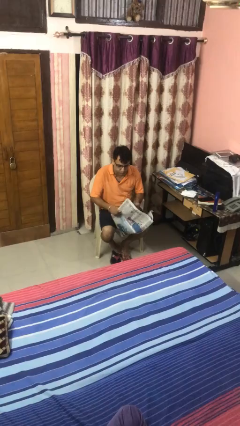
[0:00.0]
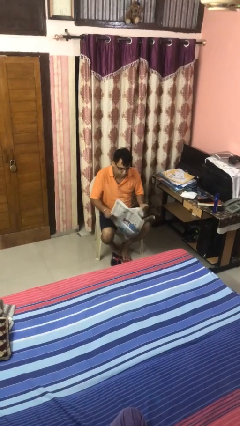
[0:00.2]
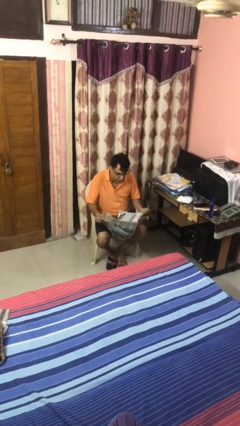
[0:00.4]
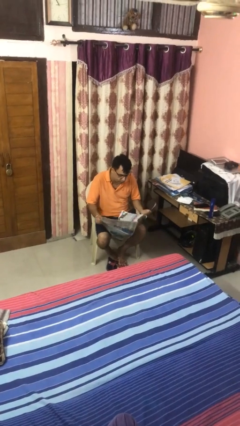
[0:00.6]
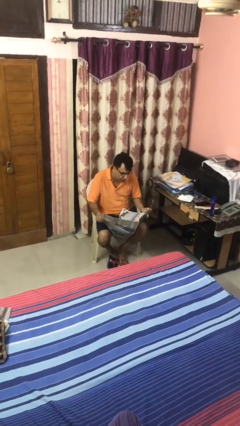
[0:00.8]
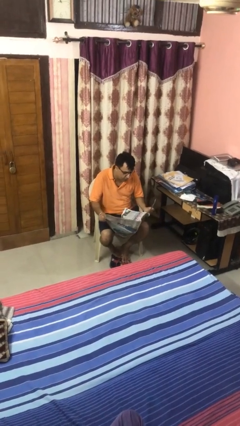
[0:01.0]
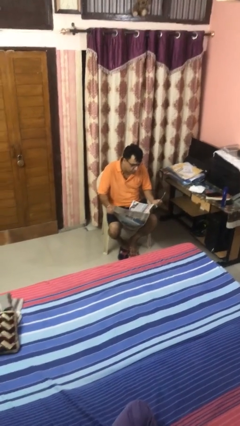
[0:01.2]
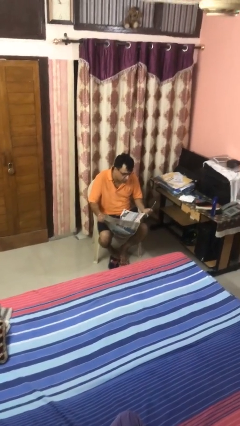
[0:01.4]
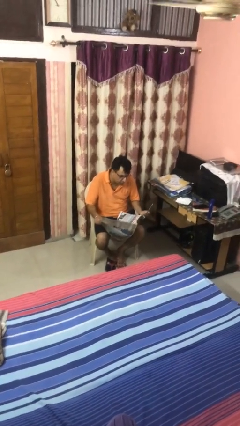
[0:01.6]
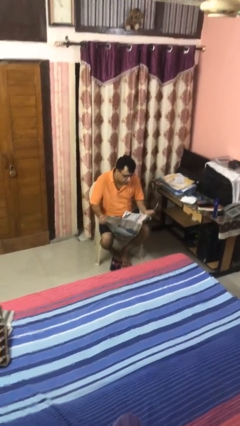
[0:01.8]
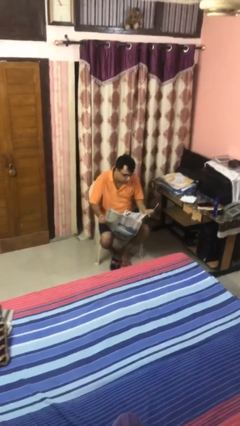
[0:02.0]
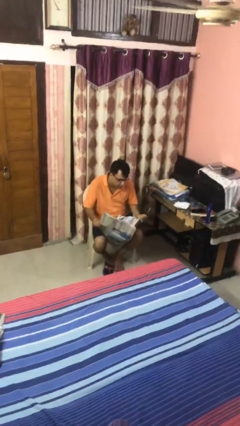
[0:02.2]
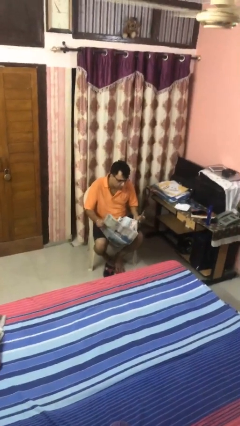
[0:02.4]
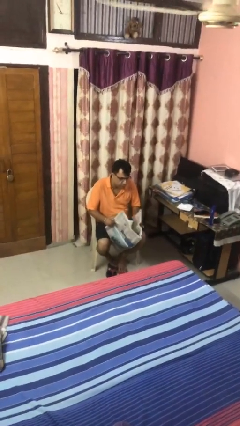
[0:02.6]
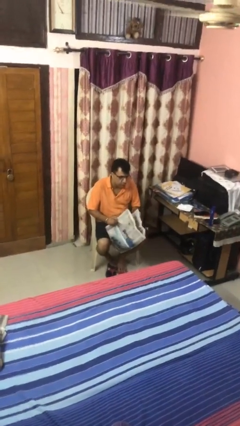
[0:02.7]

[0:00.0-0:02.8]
person reads newspaper

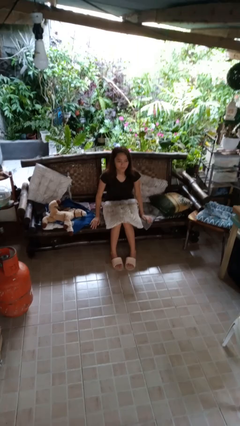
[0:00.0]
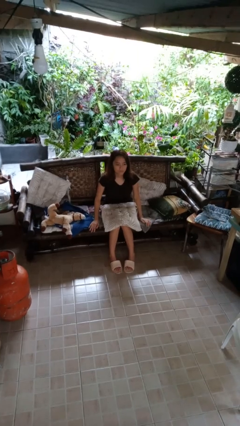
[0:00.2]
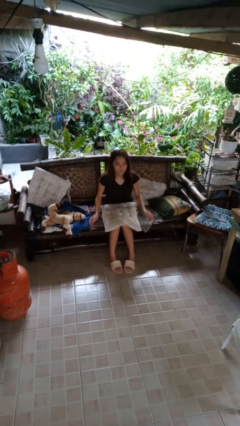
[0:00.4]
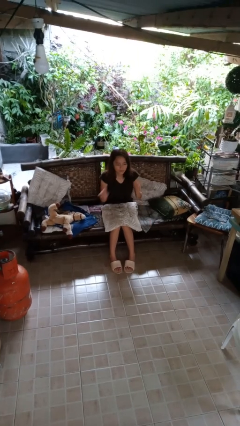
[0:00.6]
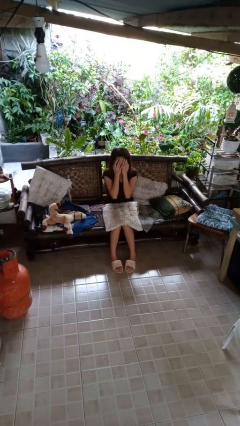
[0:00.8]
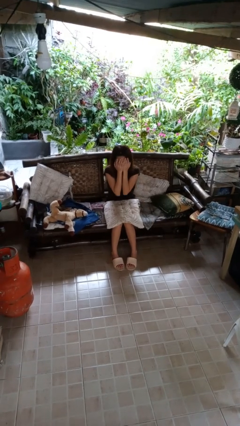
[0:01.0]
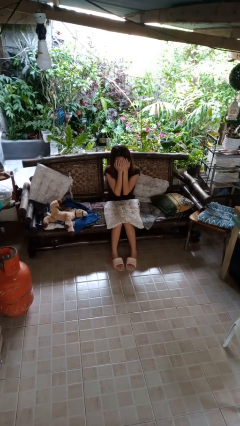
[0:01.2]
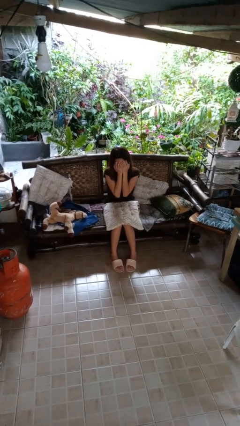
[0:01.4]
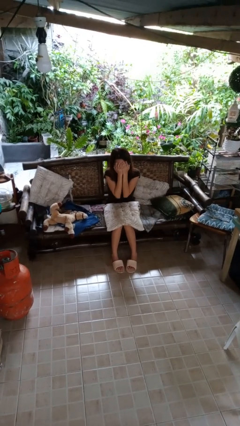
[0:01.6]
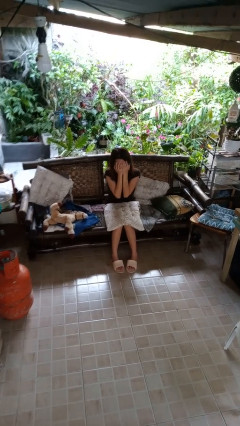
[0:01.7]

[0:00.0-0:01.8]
person covers face with hands

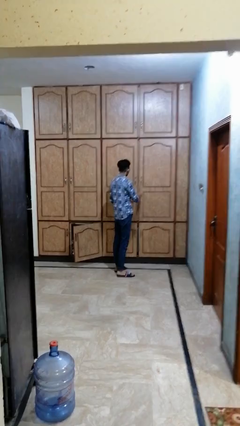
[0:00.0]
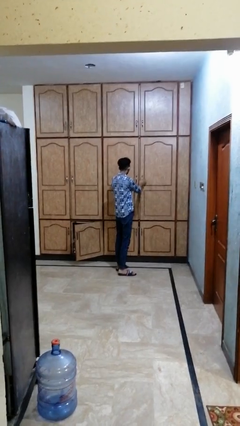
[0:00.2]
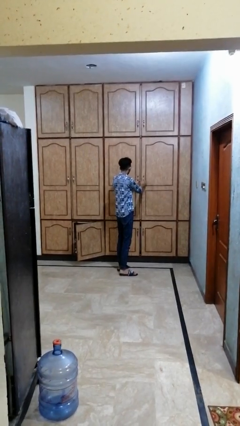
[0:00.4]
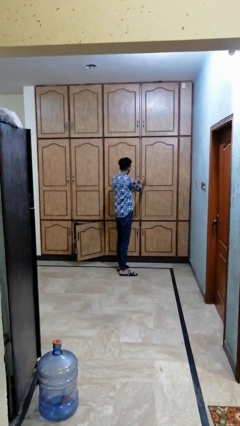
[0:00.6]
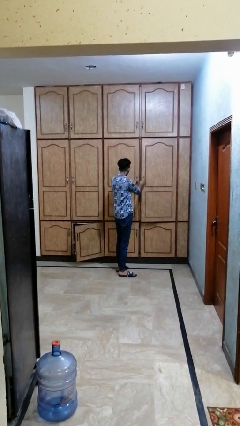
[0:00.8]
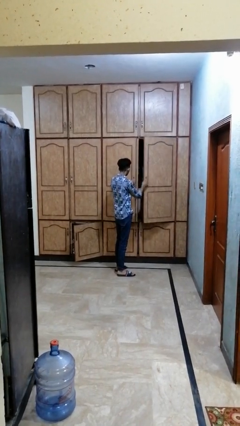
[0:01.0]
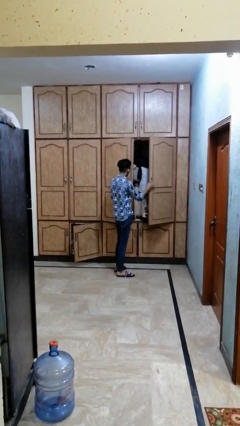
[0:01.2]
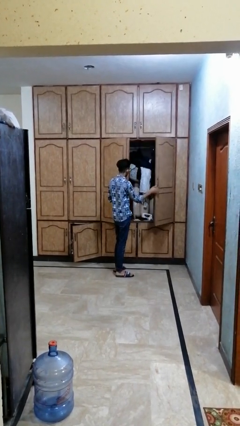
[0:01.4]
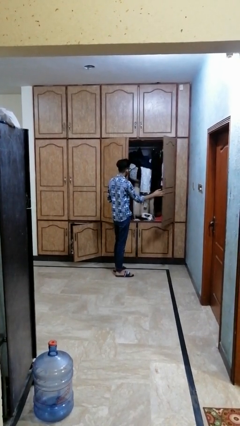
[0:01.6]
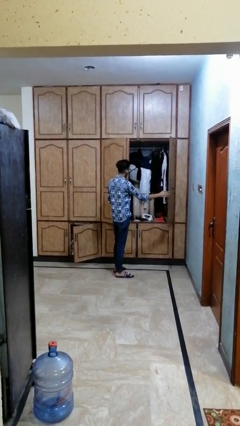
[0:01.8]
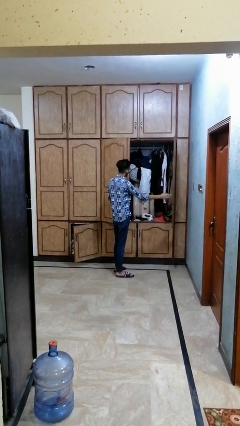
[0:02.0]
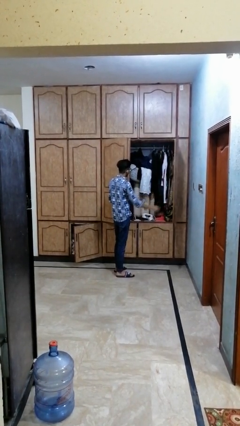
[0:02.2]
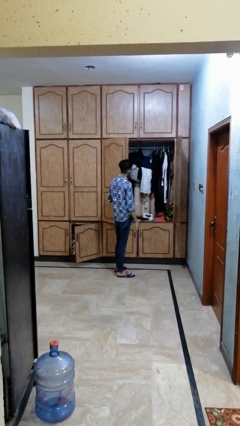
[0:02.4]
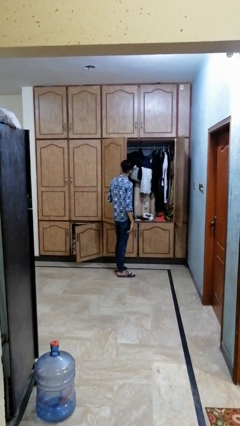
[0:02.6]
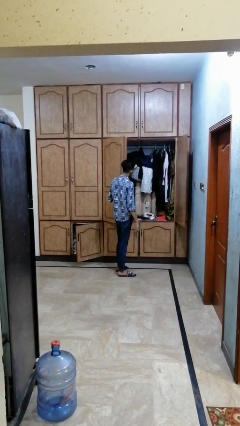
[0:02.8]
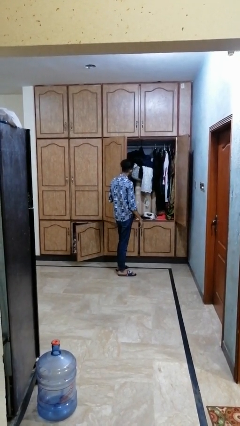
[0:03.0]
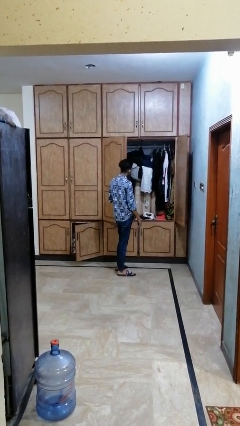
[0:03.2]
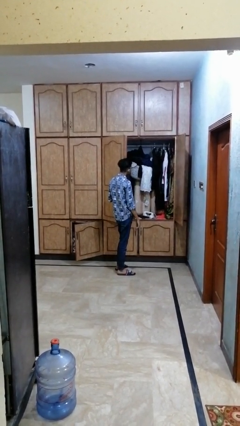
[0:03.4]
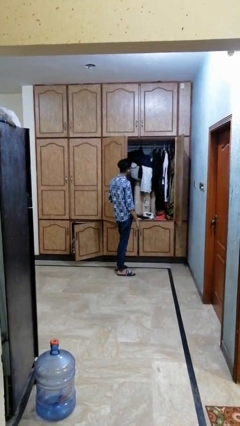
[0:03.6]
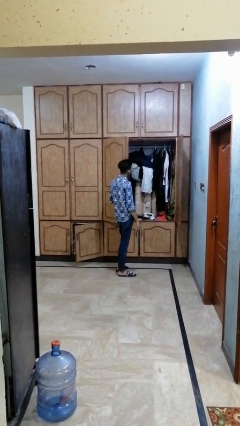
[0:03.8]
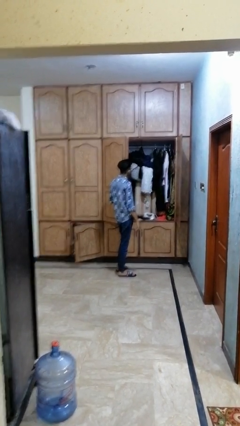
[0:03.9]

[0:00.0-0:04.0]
person opens dresser drawer

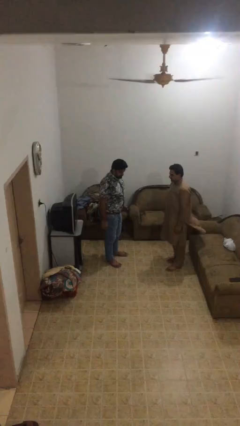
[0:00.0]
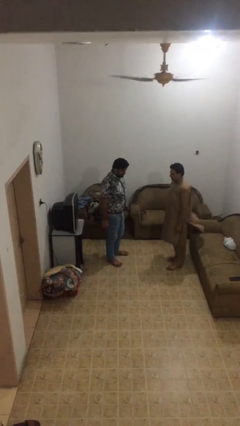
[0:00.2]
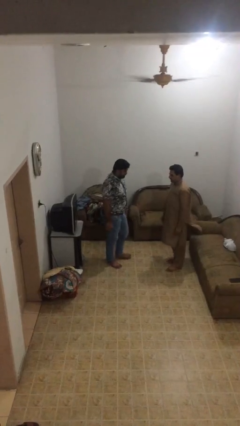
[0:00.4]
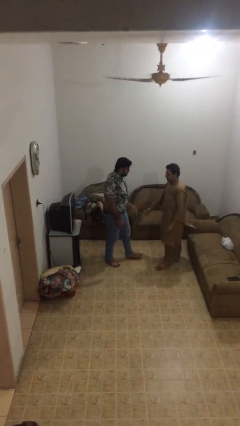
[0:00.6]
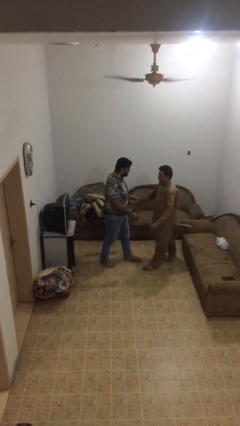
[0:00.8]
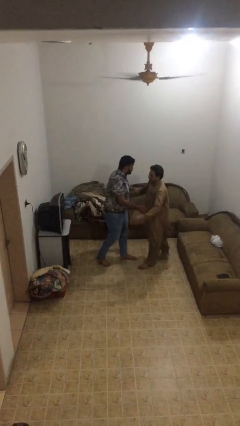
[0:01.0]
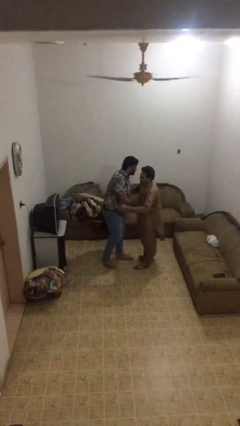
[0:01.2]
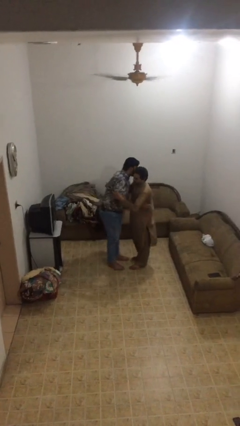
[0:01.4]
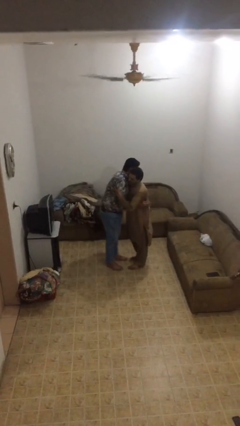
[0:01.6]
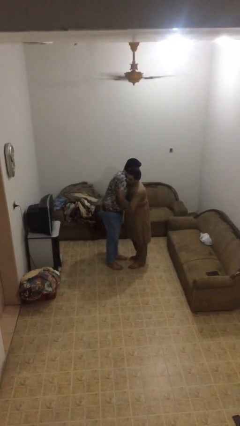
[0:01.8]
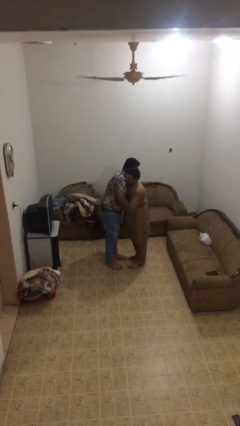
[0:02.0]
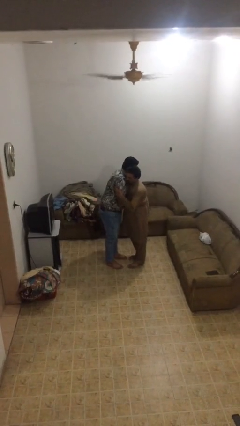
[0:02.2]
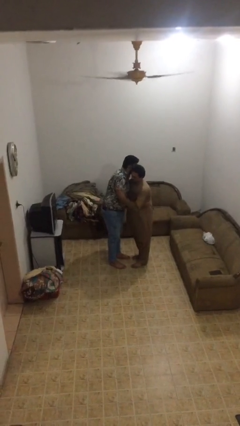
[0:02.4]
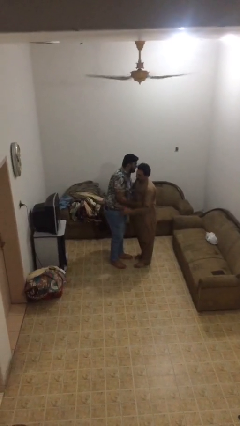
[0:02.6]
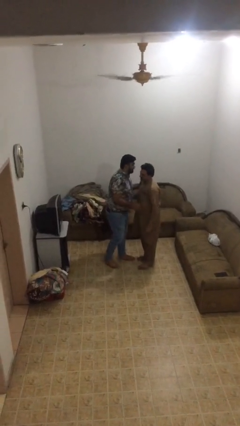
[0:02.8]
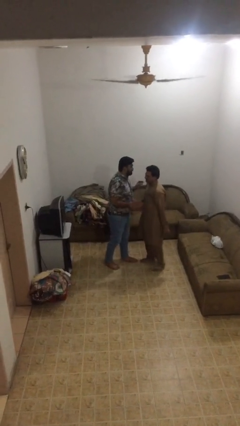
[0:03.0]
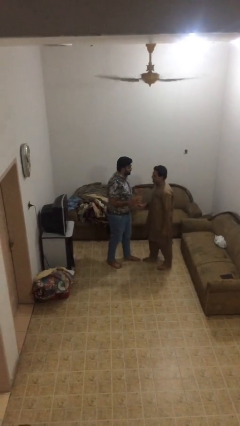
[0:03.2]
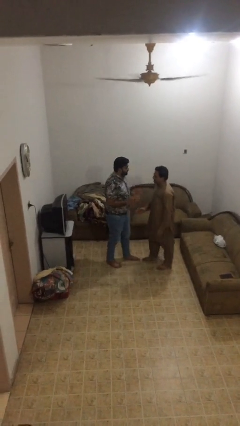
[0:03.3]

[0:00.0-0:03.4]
person embraces person

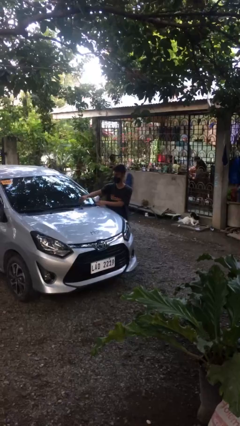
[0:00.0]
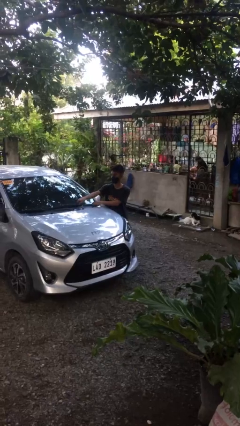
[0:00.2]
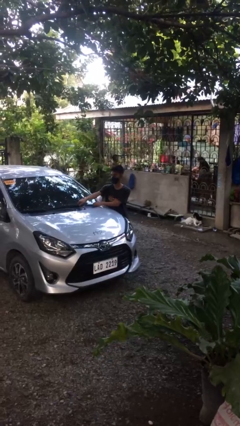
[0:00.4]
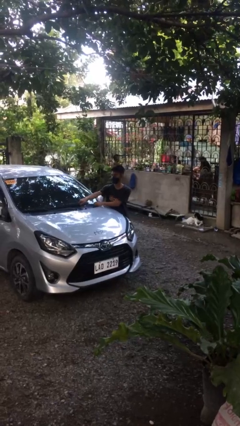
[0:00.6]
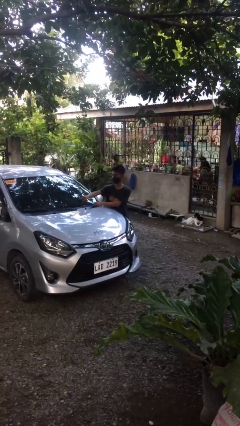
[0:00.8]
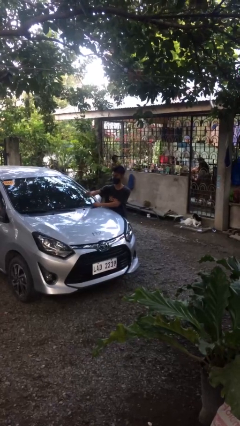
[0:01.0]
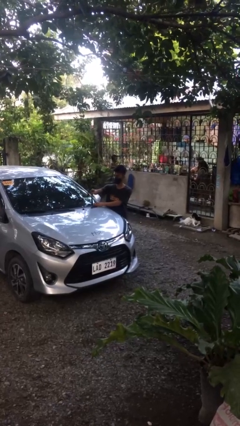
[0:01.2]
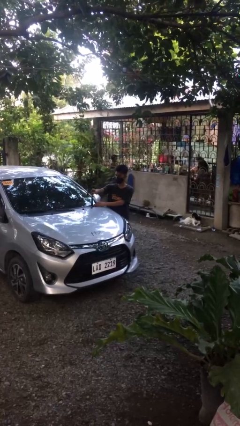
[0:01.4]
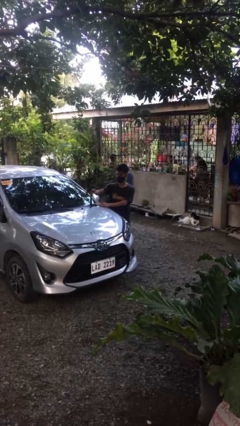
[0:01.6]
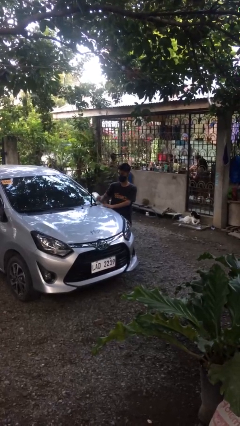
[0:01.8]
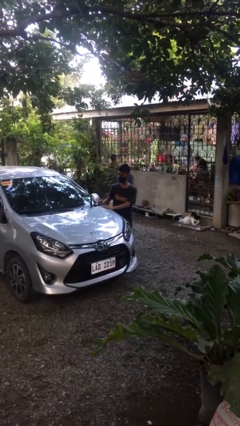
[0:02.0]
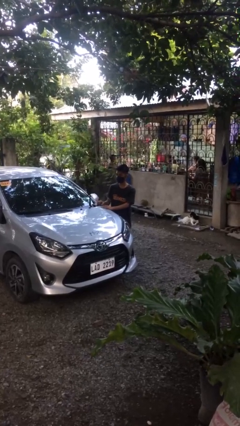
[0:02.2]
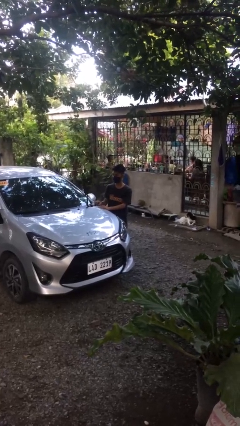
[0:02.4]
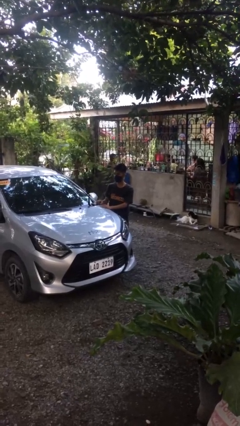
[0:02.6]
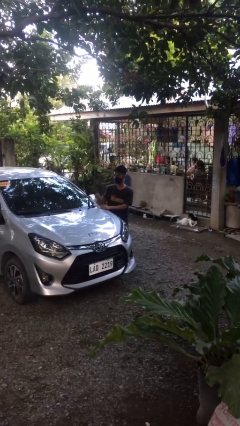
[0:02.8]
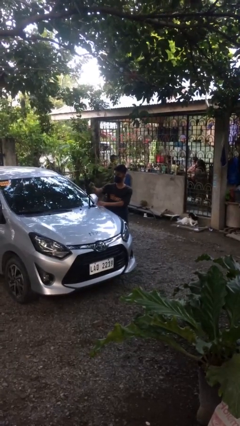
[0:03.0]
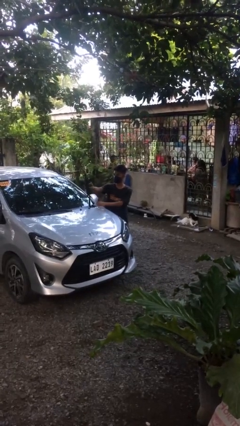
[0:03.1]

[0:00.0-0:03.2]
person flips up car wipers

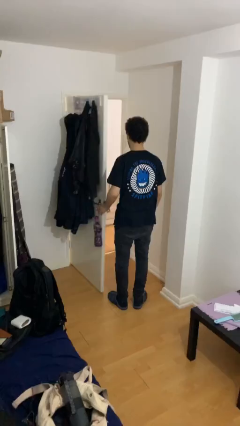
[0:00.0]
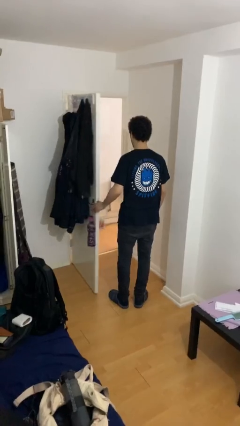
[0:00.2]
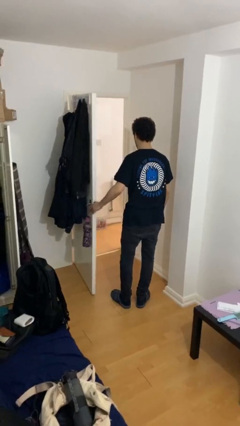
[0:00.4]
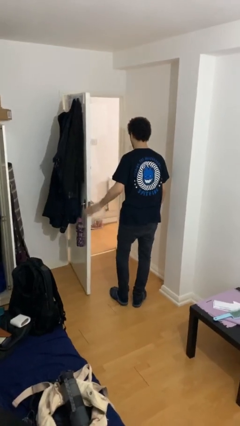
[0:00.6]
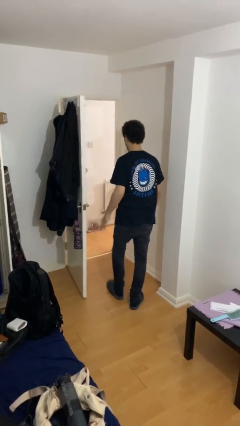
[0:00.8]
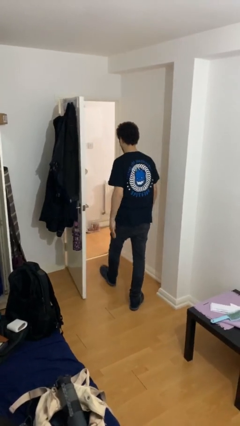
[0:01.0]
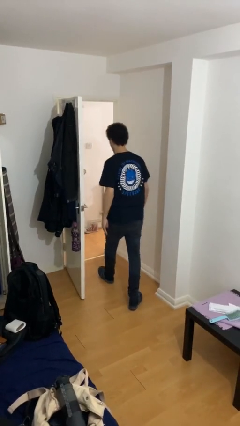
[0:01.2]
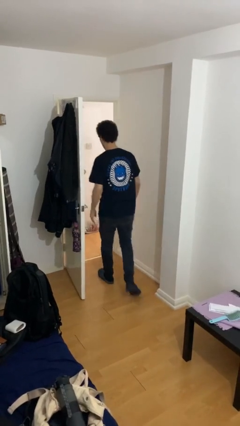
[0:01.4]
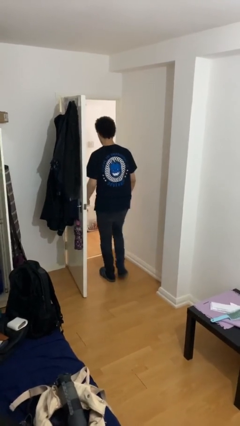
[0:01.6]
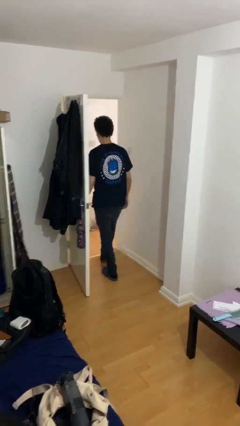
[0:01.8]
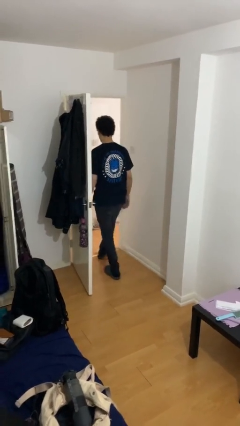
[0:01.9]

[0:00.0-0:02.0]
person exits scene through structure
